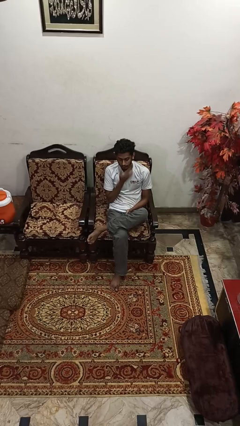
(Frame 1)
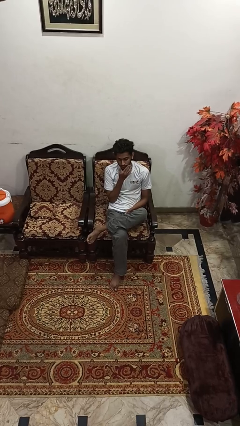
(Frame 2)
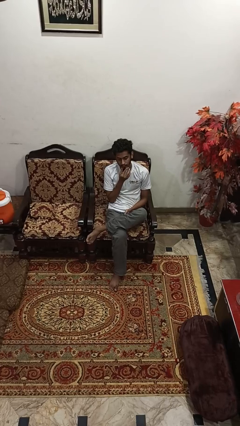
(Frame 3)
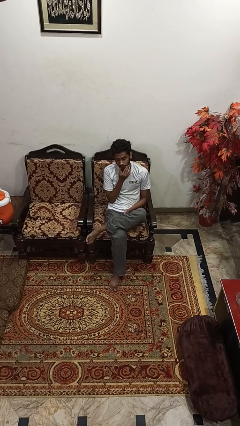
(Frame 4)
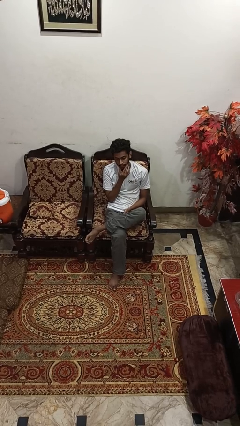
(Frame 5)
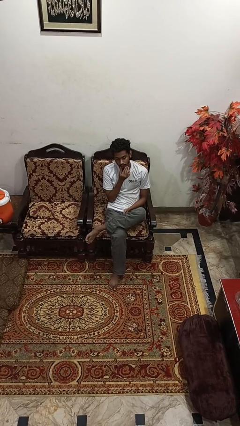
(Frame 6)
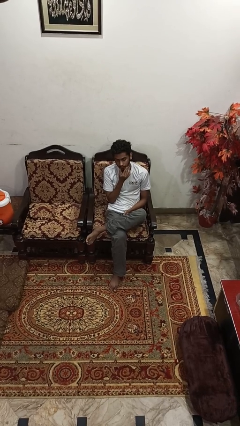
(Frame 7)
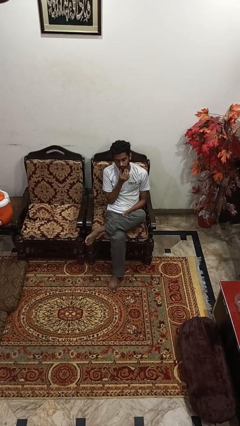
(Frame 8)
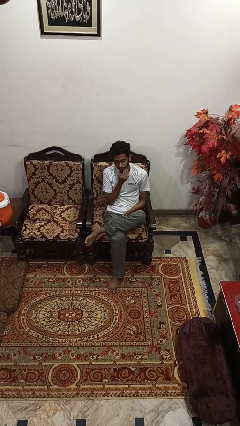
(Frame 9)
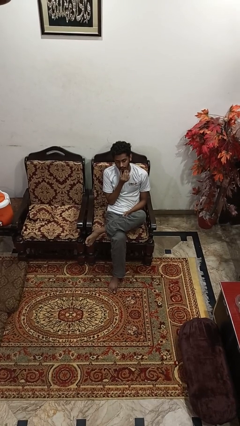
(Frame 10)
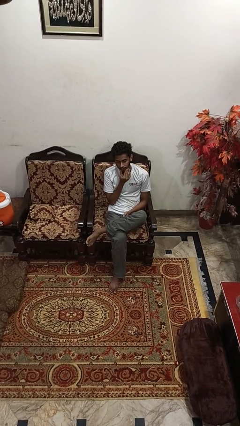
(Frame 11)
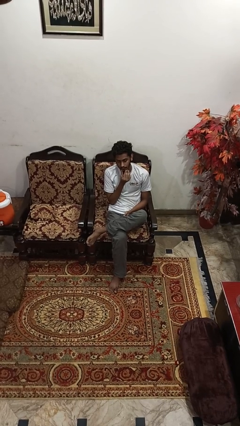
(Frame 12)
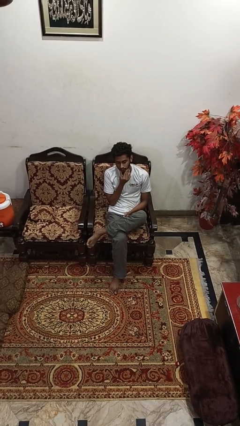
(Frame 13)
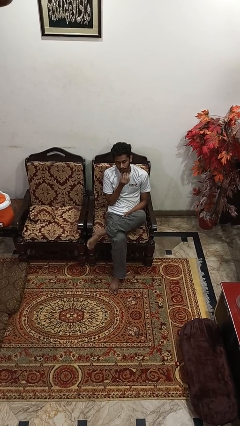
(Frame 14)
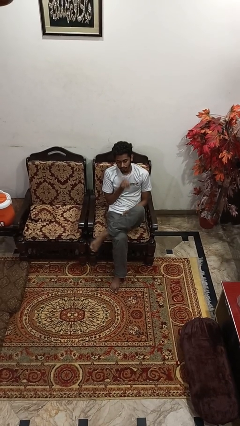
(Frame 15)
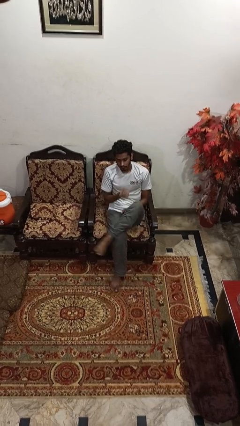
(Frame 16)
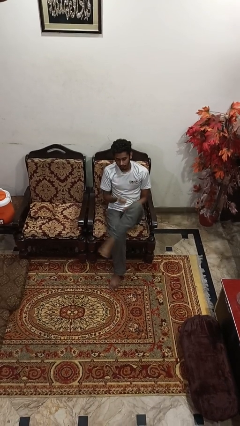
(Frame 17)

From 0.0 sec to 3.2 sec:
person strokes chin

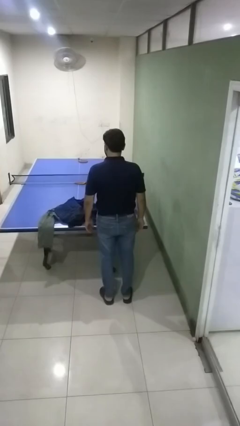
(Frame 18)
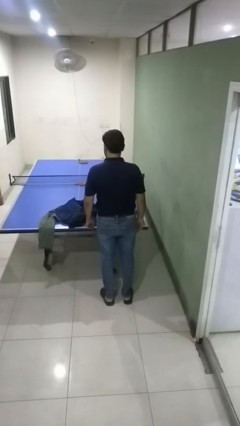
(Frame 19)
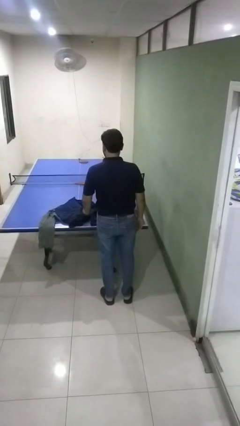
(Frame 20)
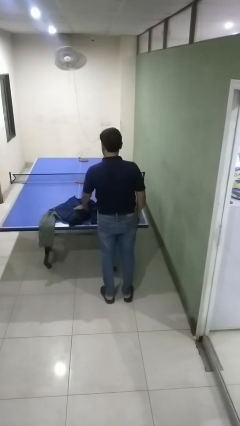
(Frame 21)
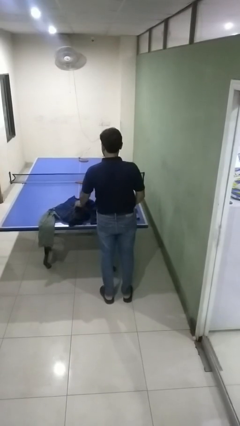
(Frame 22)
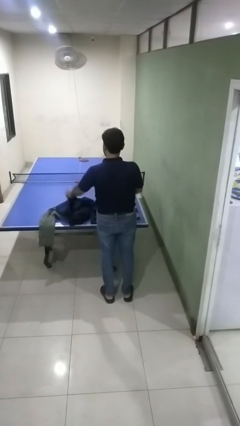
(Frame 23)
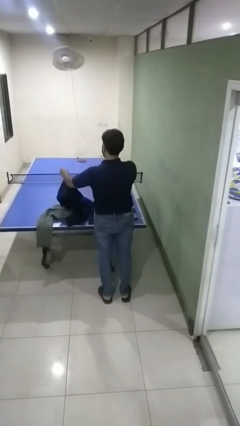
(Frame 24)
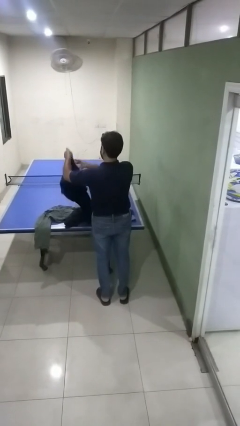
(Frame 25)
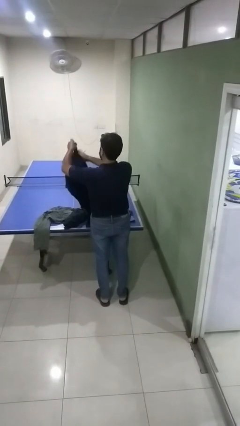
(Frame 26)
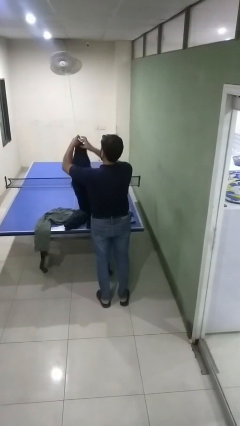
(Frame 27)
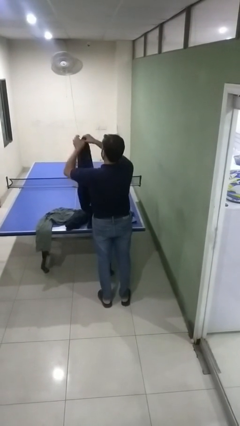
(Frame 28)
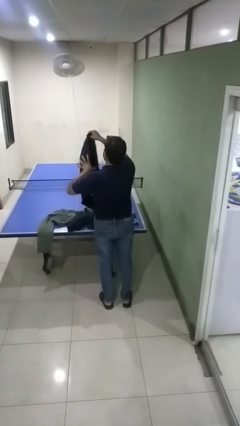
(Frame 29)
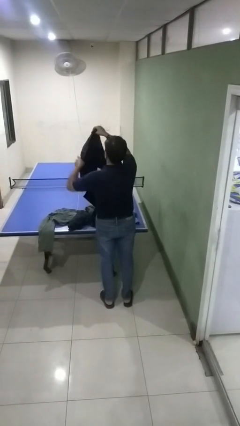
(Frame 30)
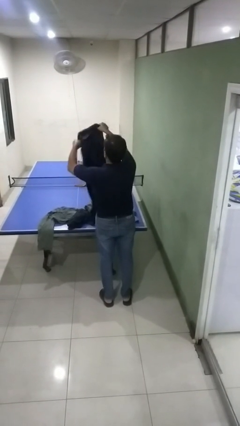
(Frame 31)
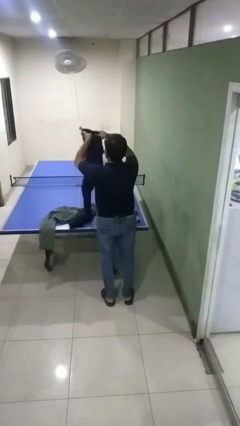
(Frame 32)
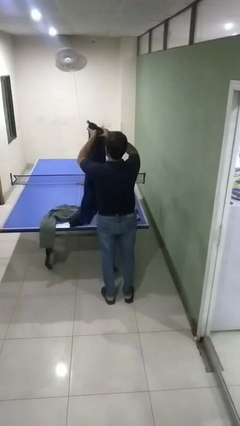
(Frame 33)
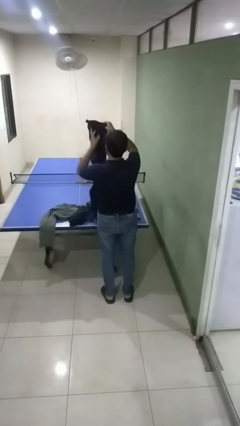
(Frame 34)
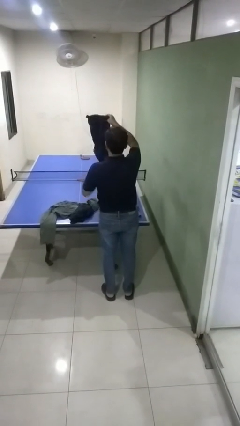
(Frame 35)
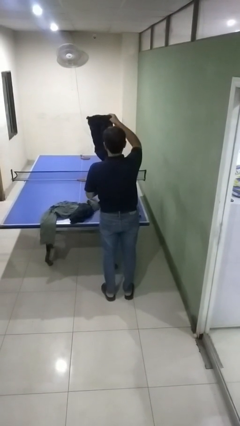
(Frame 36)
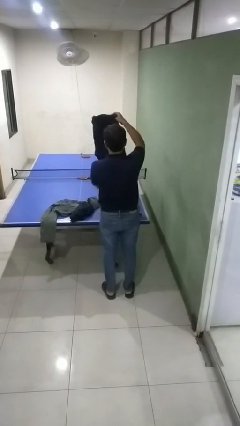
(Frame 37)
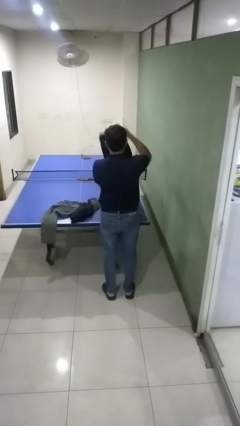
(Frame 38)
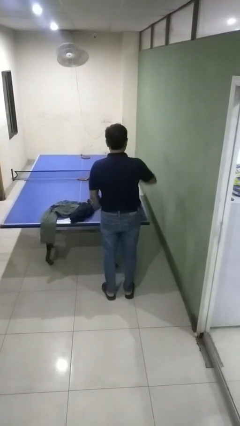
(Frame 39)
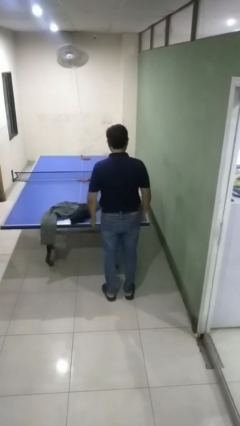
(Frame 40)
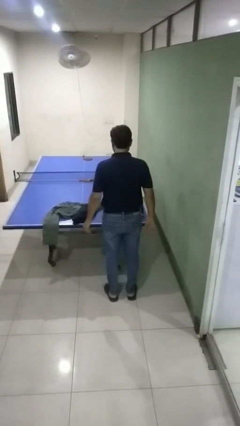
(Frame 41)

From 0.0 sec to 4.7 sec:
person folds pants

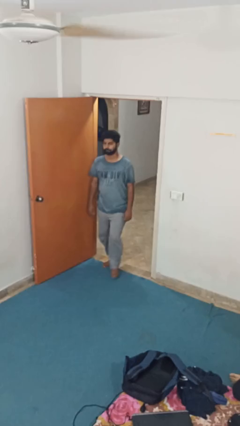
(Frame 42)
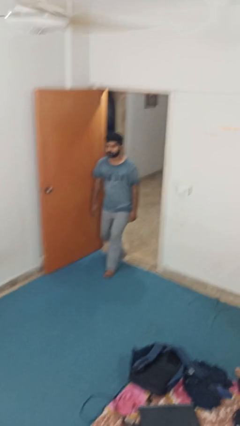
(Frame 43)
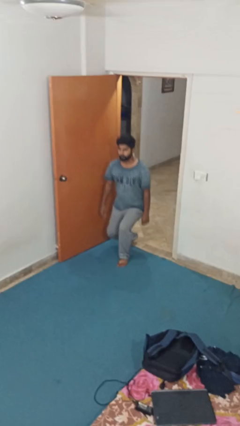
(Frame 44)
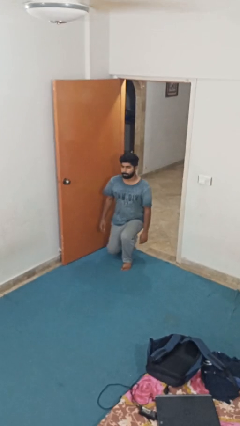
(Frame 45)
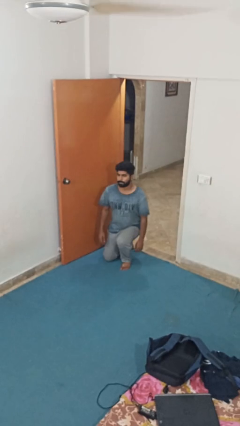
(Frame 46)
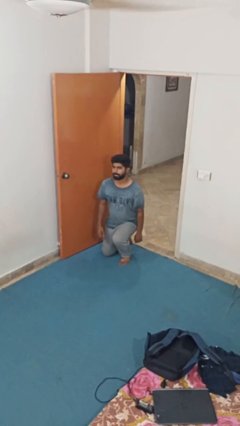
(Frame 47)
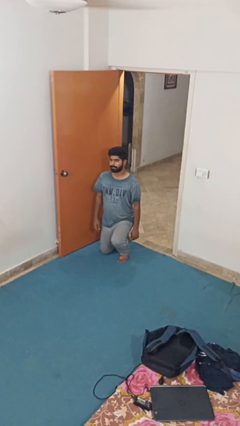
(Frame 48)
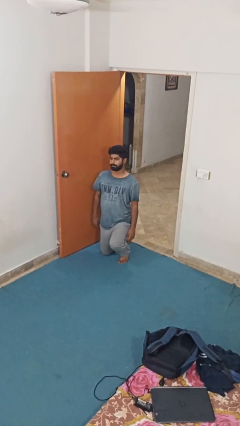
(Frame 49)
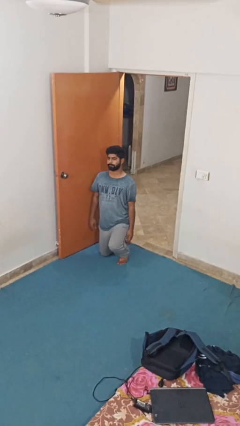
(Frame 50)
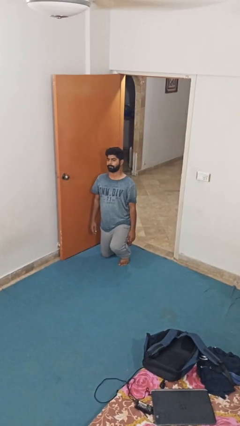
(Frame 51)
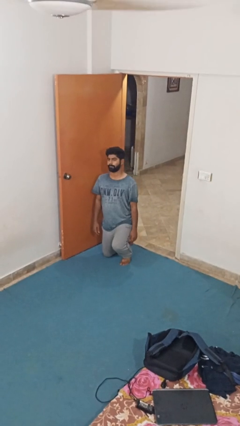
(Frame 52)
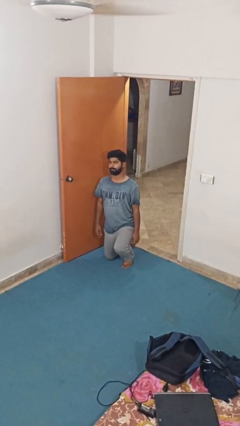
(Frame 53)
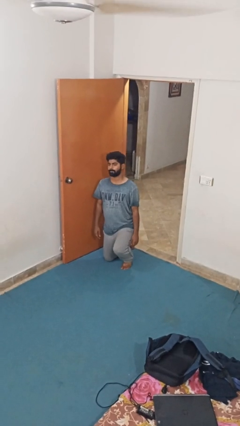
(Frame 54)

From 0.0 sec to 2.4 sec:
person kneels

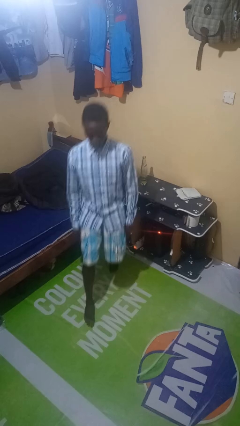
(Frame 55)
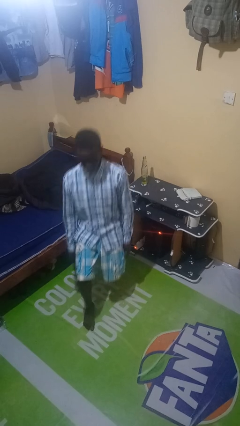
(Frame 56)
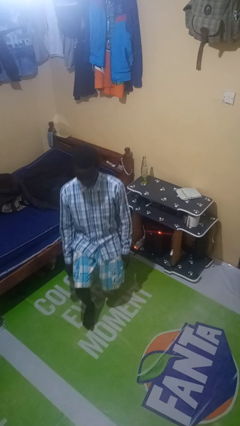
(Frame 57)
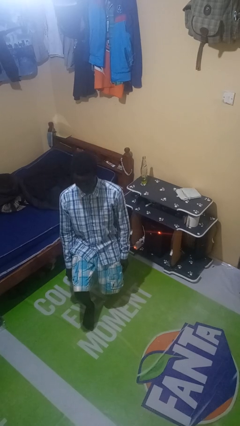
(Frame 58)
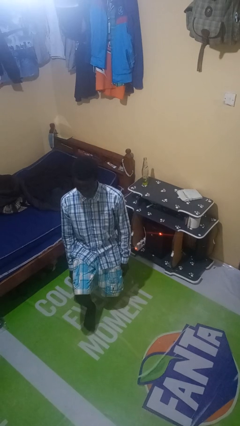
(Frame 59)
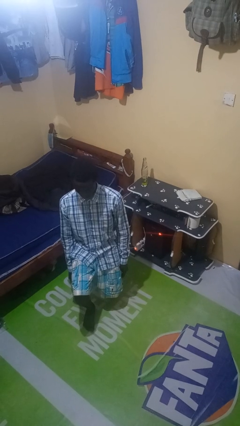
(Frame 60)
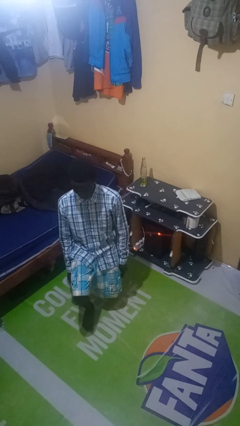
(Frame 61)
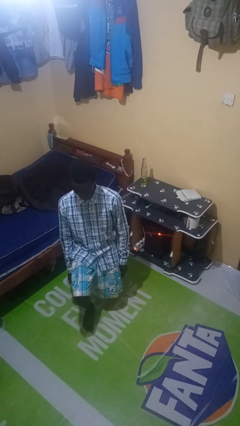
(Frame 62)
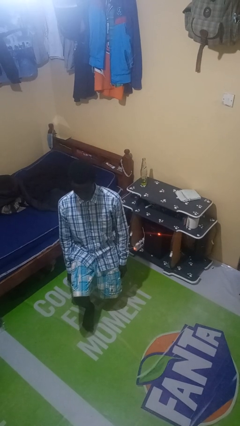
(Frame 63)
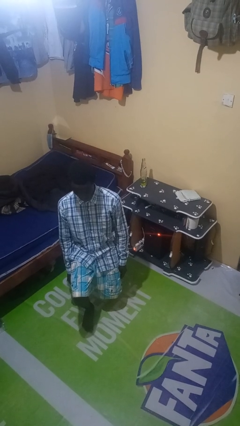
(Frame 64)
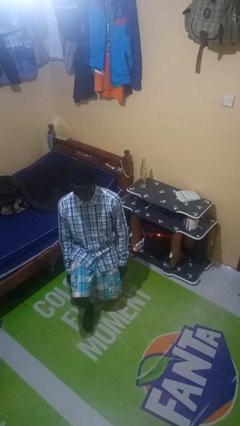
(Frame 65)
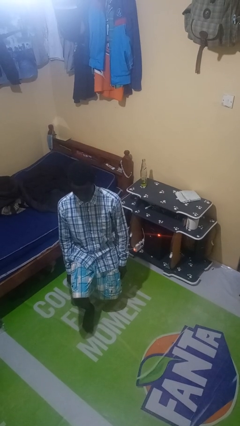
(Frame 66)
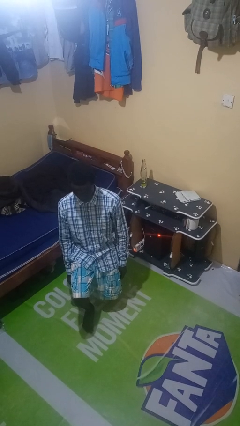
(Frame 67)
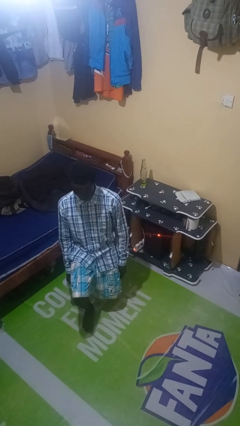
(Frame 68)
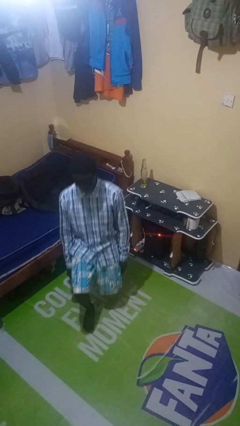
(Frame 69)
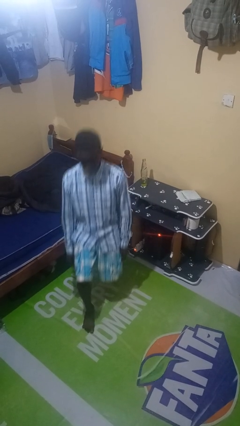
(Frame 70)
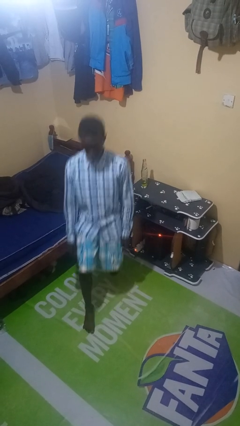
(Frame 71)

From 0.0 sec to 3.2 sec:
person exercises with lunges

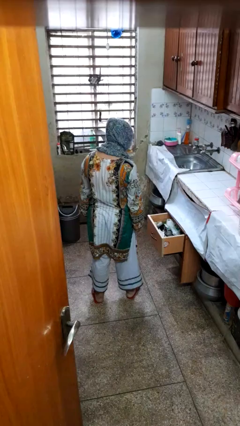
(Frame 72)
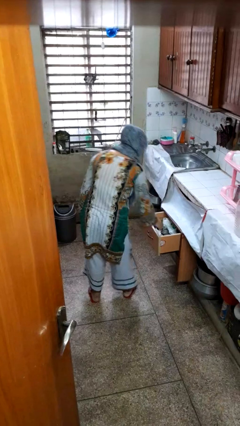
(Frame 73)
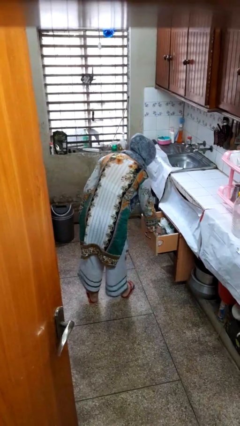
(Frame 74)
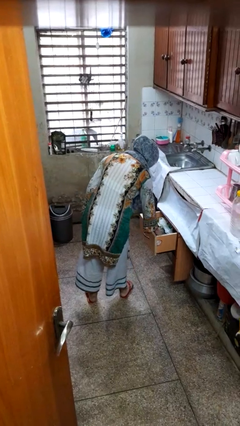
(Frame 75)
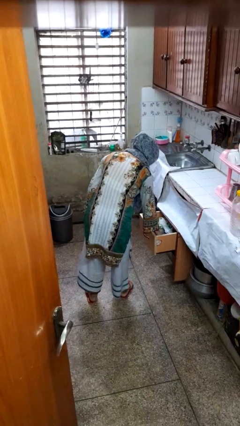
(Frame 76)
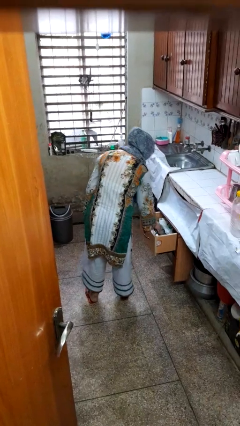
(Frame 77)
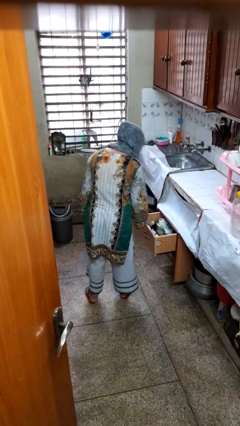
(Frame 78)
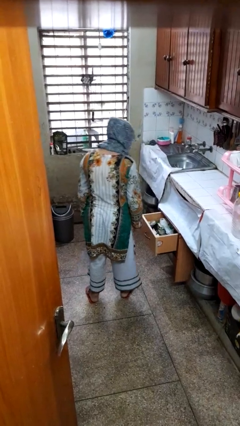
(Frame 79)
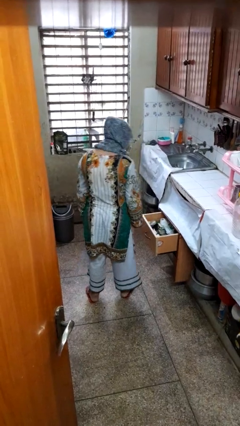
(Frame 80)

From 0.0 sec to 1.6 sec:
person searches in kitchen drawer

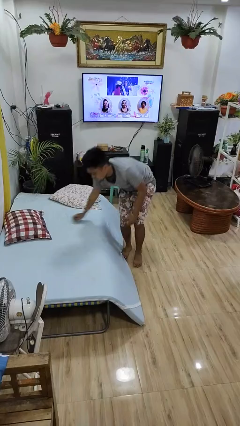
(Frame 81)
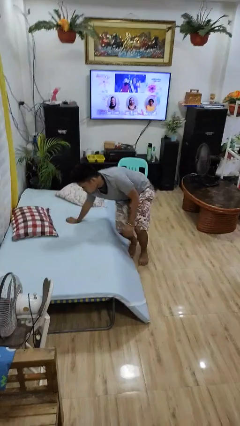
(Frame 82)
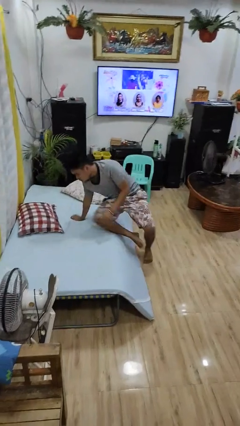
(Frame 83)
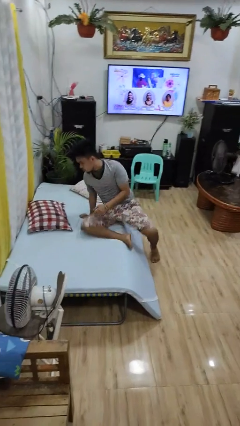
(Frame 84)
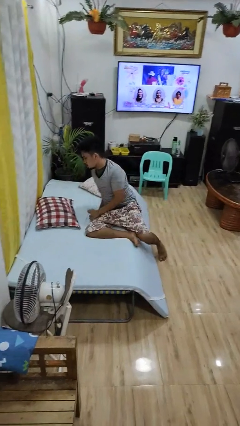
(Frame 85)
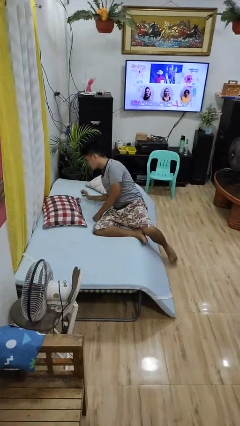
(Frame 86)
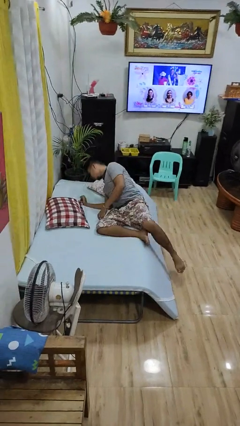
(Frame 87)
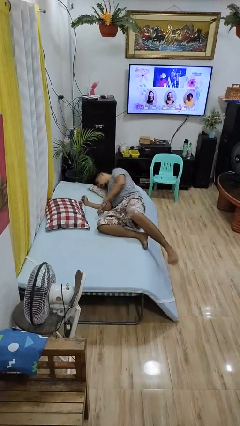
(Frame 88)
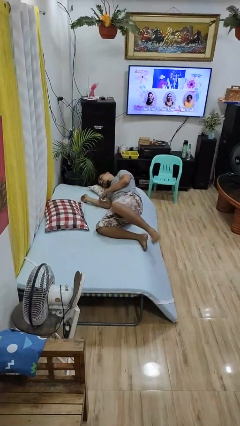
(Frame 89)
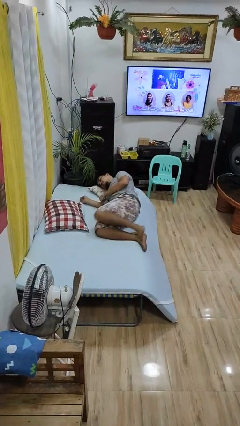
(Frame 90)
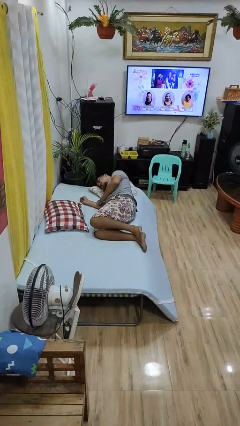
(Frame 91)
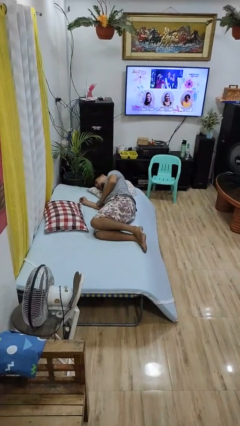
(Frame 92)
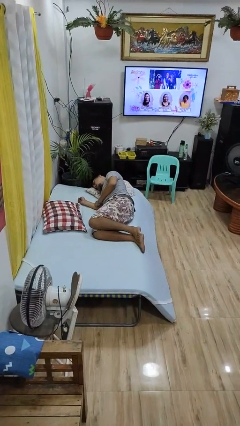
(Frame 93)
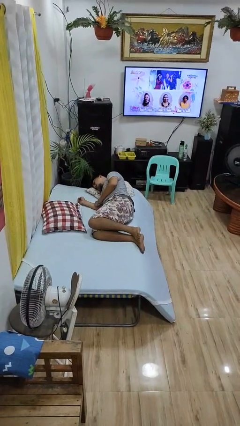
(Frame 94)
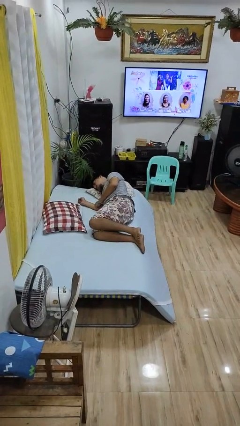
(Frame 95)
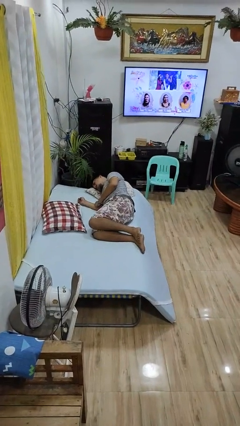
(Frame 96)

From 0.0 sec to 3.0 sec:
person lies down on bed
